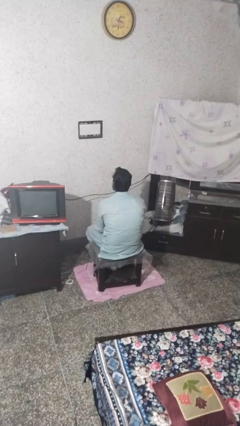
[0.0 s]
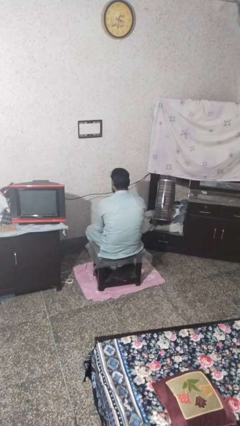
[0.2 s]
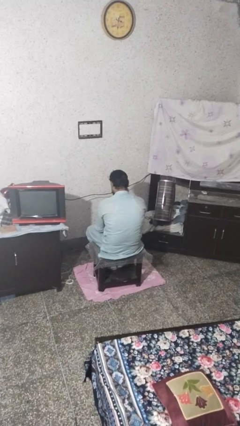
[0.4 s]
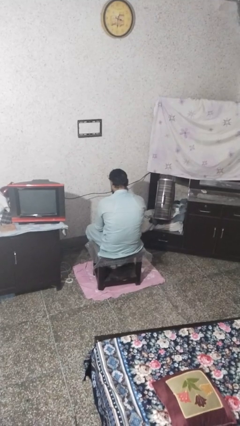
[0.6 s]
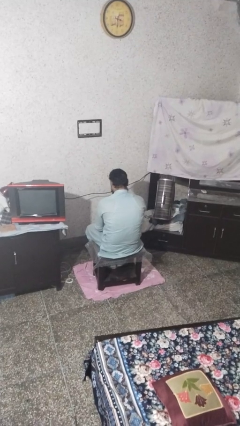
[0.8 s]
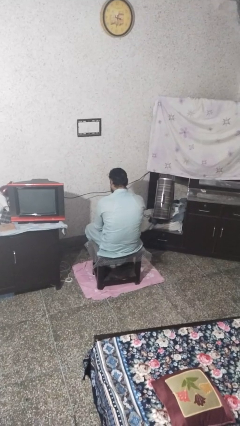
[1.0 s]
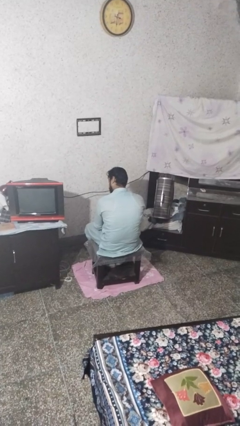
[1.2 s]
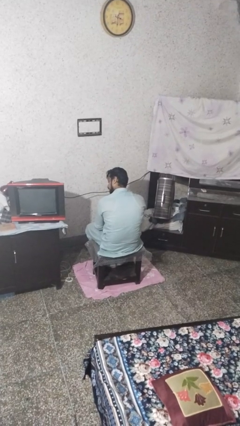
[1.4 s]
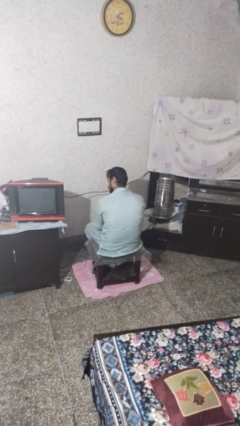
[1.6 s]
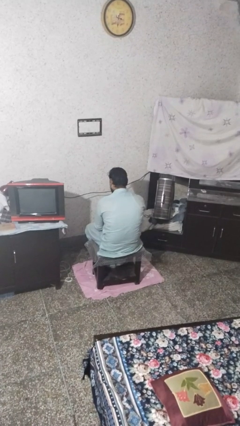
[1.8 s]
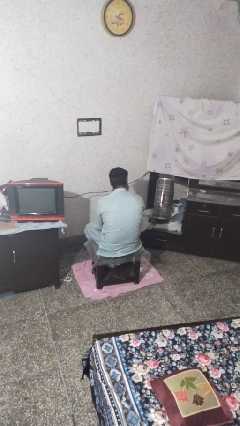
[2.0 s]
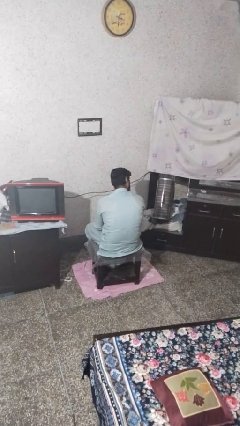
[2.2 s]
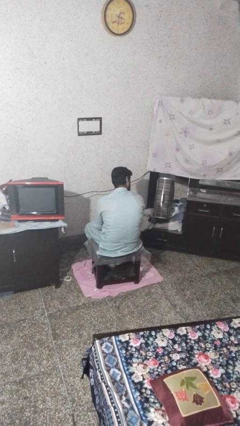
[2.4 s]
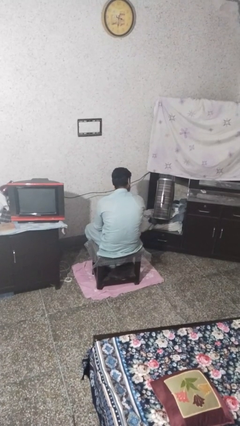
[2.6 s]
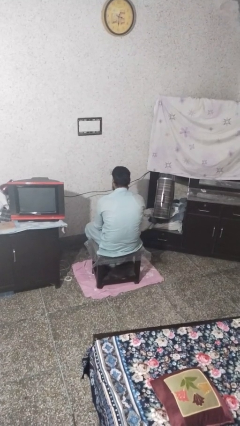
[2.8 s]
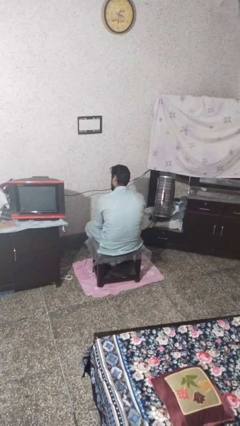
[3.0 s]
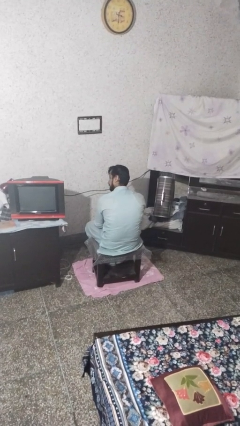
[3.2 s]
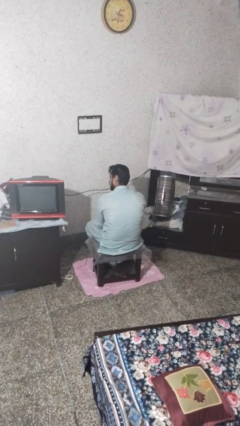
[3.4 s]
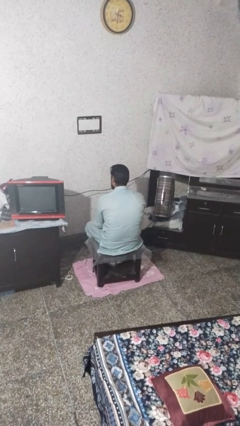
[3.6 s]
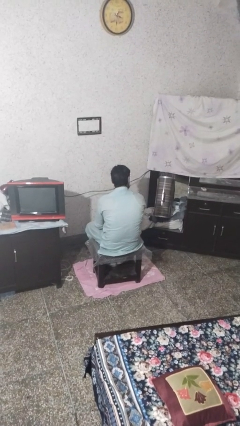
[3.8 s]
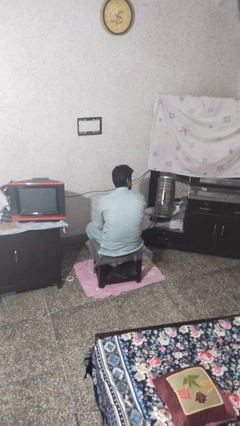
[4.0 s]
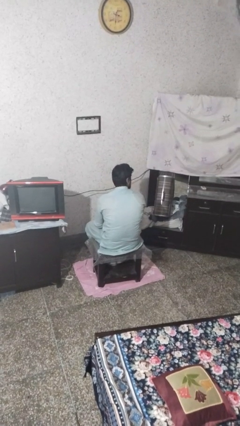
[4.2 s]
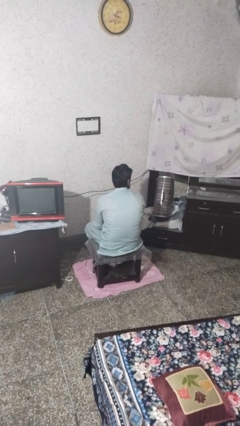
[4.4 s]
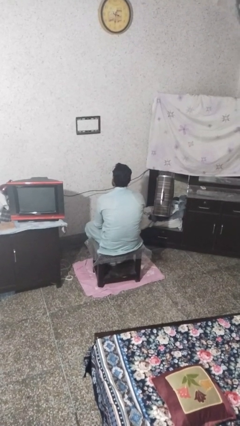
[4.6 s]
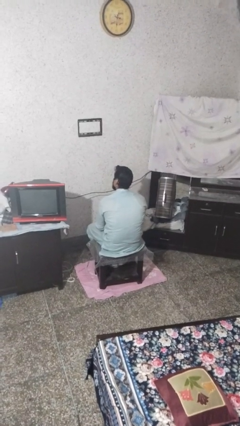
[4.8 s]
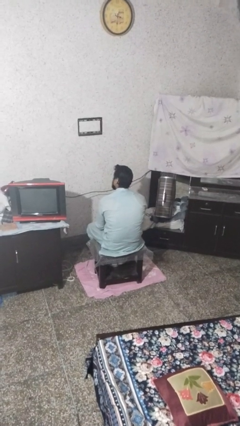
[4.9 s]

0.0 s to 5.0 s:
person shakes head

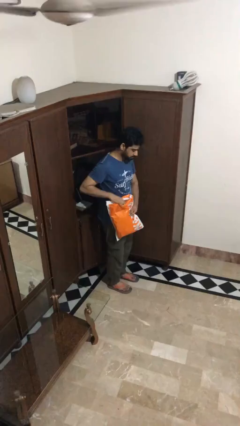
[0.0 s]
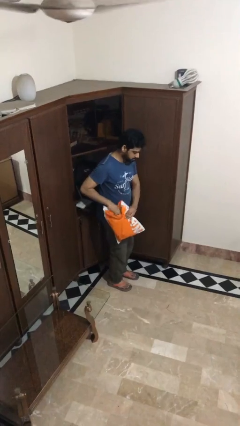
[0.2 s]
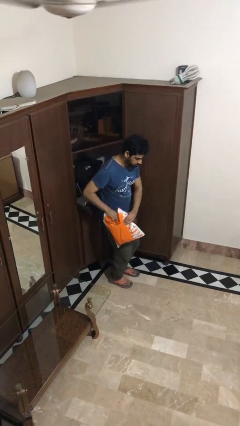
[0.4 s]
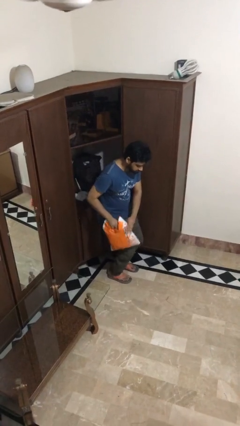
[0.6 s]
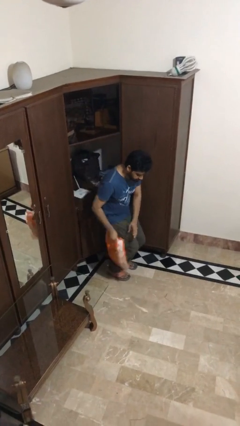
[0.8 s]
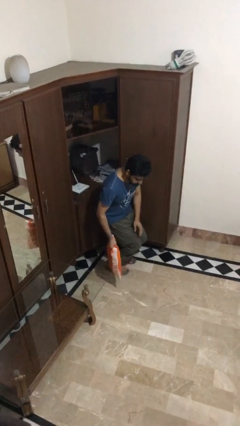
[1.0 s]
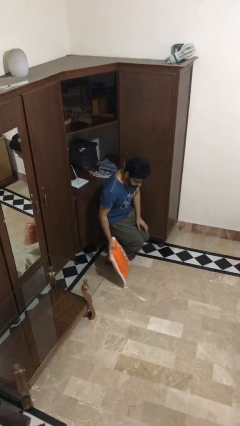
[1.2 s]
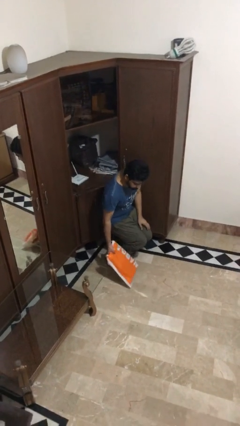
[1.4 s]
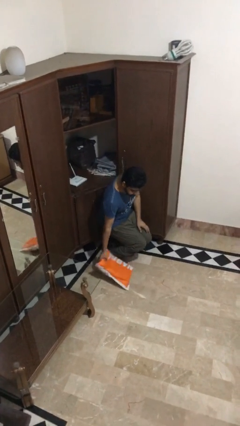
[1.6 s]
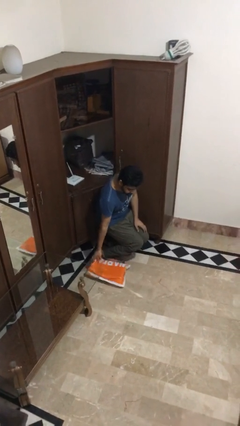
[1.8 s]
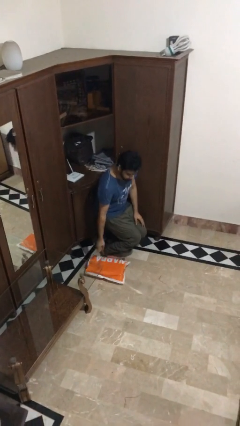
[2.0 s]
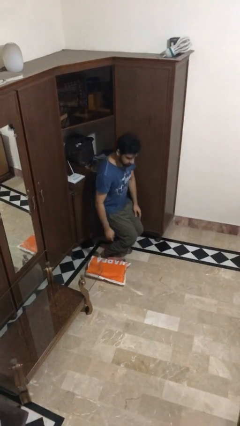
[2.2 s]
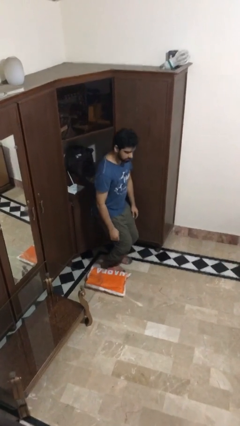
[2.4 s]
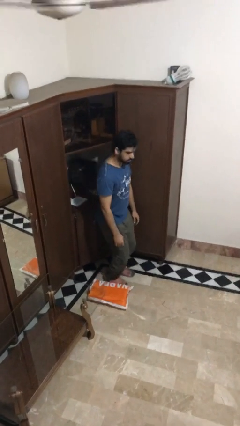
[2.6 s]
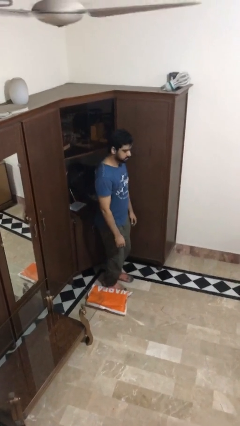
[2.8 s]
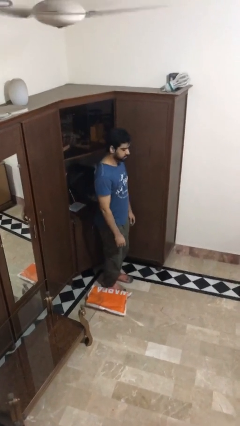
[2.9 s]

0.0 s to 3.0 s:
person puts down object on floor

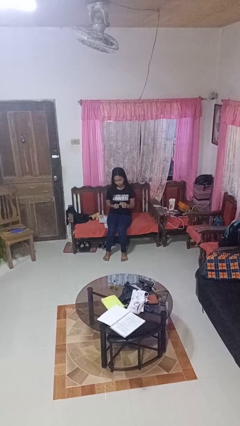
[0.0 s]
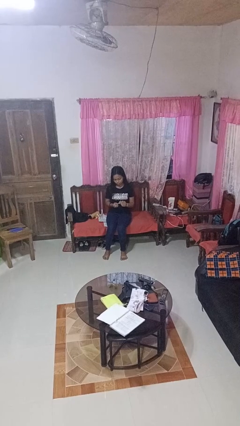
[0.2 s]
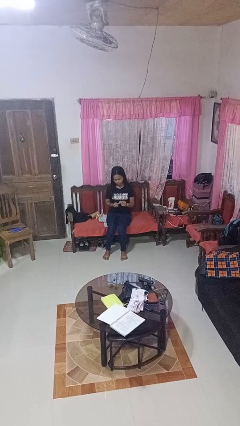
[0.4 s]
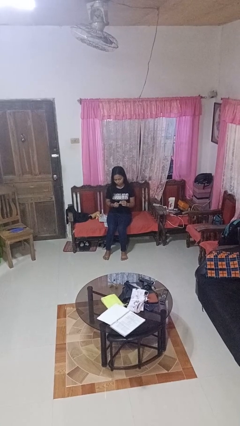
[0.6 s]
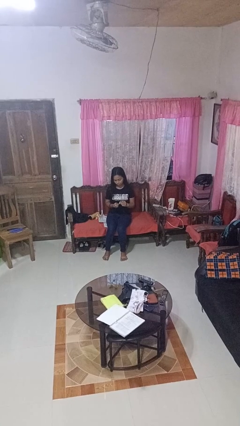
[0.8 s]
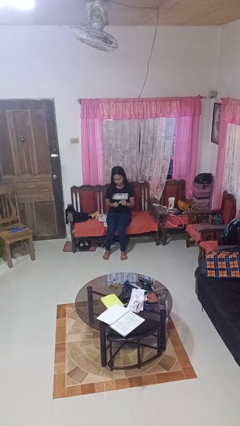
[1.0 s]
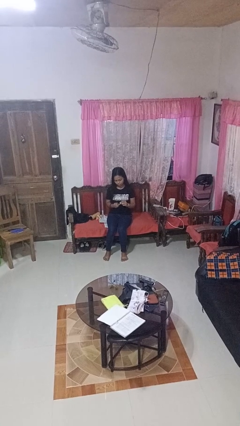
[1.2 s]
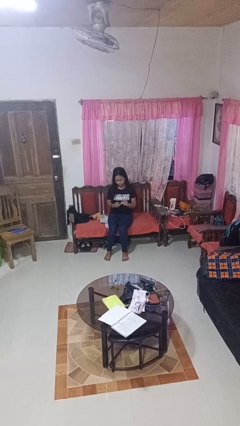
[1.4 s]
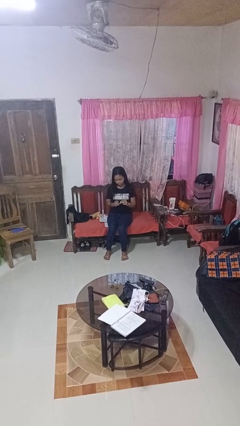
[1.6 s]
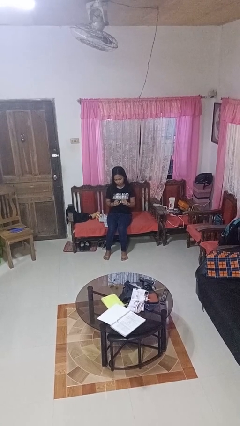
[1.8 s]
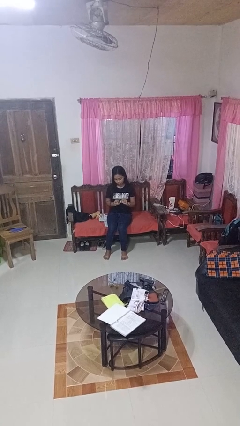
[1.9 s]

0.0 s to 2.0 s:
person clips fingernails

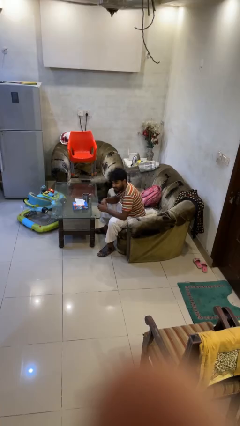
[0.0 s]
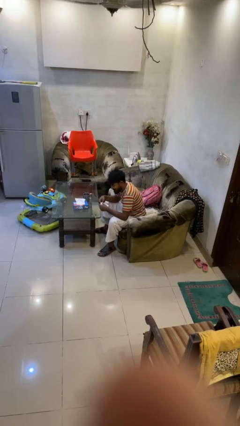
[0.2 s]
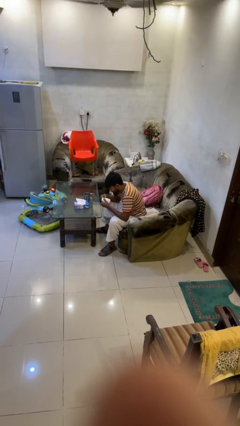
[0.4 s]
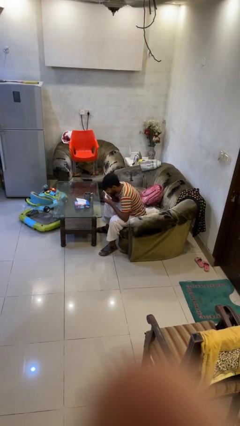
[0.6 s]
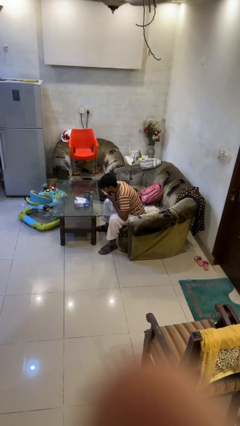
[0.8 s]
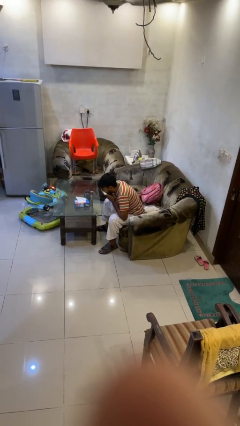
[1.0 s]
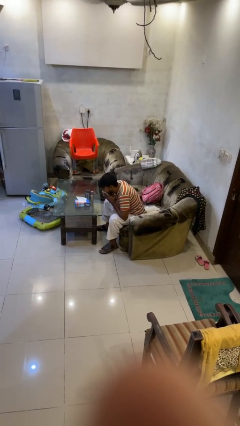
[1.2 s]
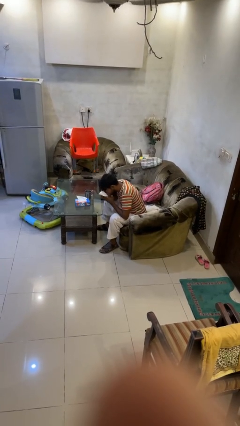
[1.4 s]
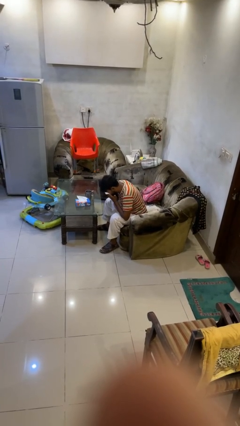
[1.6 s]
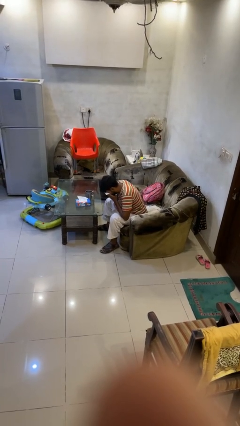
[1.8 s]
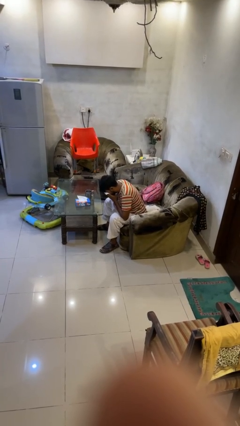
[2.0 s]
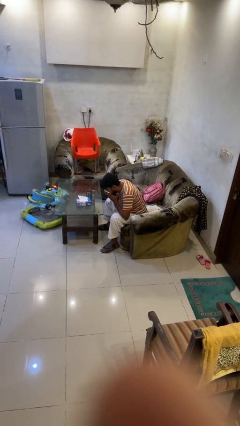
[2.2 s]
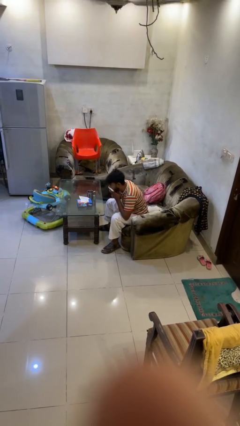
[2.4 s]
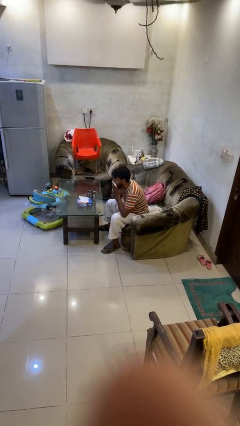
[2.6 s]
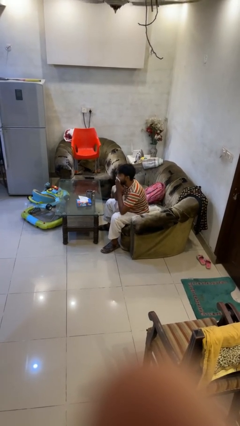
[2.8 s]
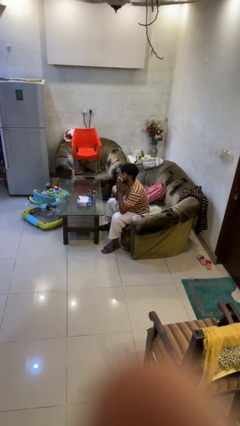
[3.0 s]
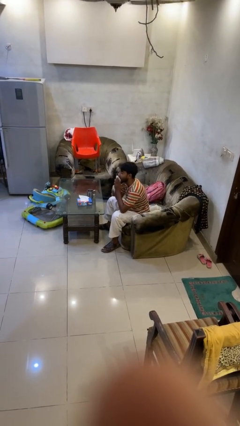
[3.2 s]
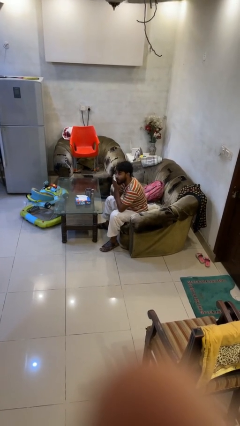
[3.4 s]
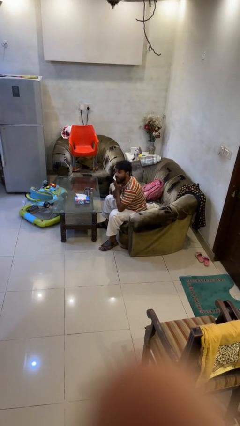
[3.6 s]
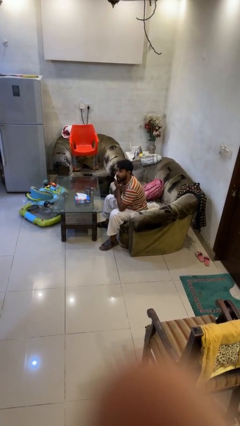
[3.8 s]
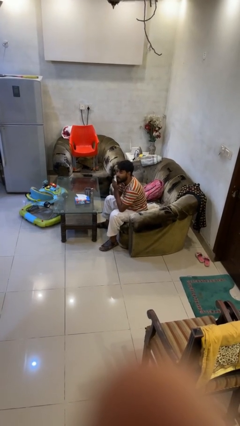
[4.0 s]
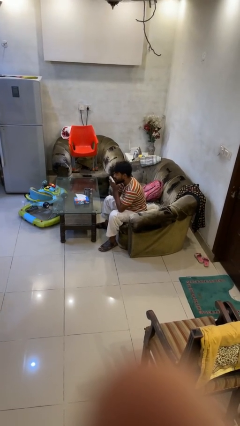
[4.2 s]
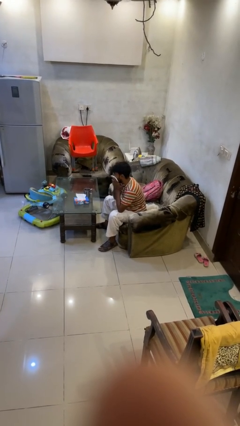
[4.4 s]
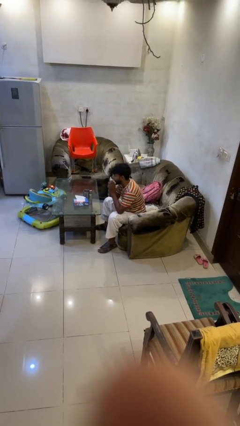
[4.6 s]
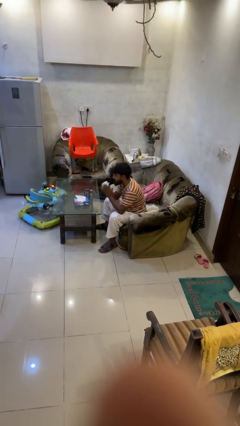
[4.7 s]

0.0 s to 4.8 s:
person wipes mouth with napkin

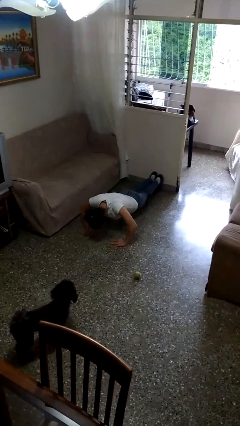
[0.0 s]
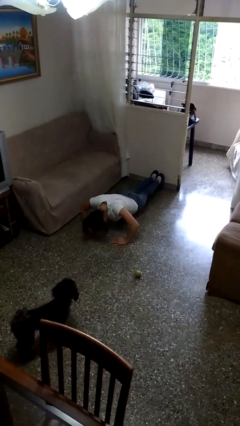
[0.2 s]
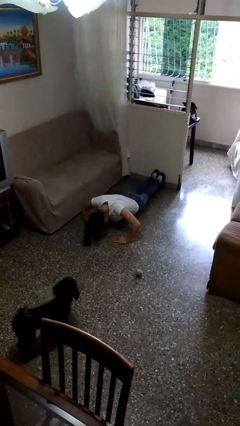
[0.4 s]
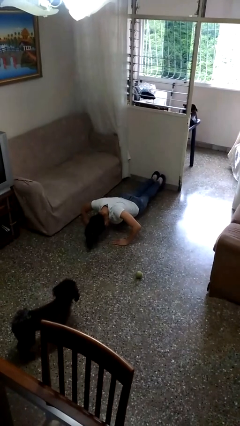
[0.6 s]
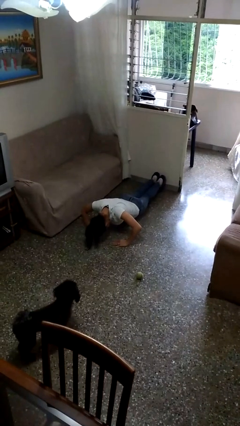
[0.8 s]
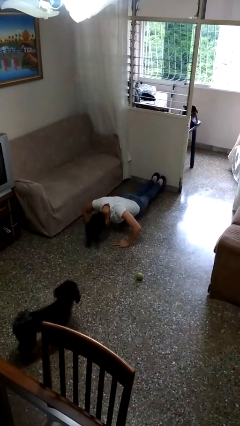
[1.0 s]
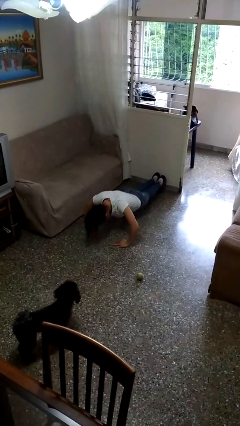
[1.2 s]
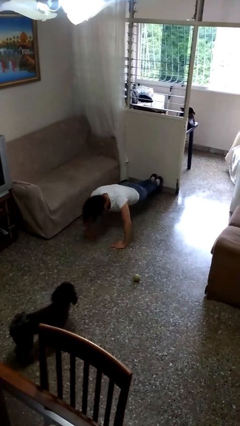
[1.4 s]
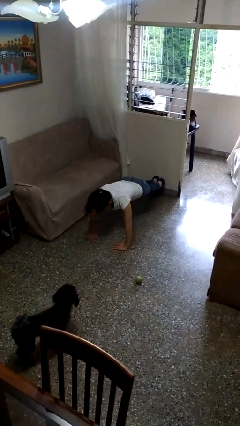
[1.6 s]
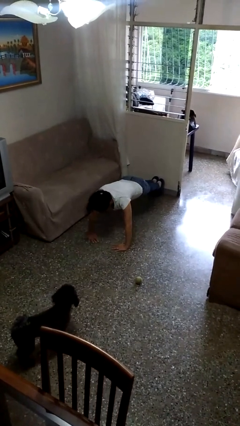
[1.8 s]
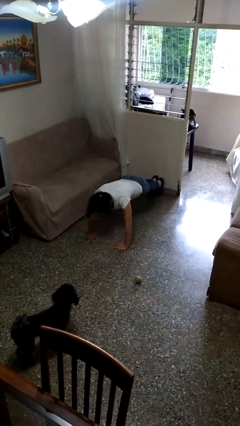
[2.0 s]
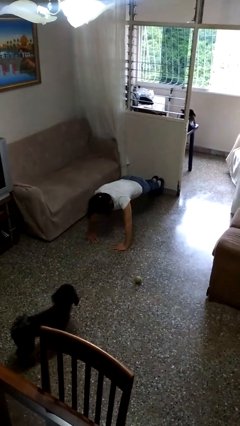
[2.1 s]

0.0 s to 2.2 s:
person exercises with pushup

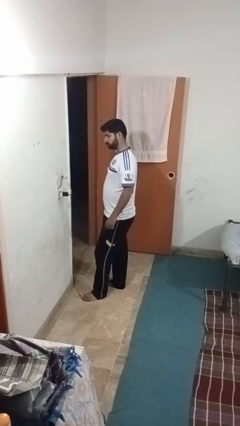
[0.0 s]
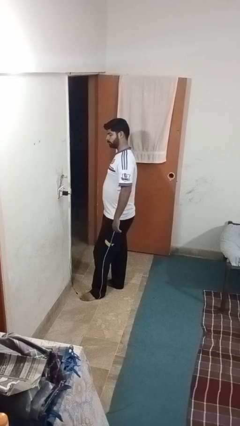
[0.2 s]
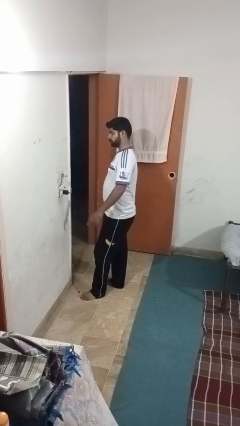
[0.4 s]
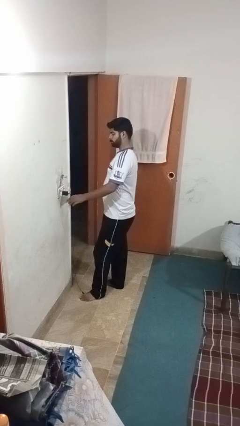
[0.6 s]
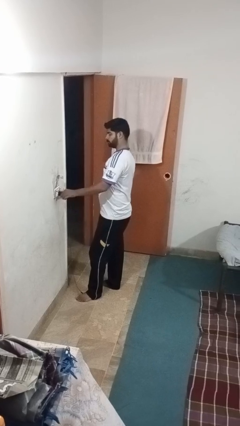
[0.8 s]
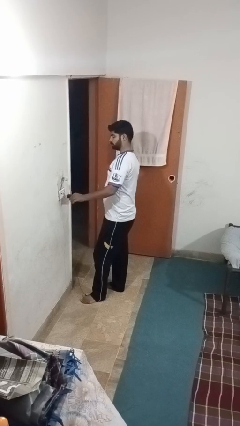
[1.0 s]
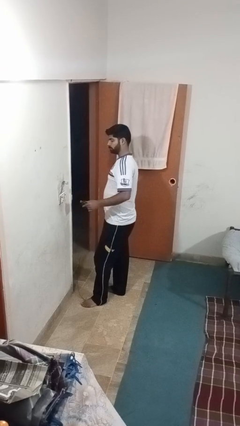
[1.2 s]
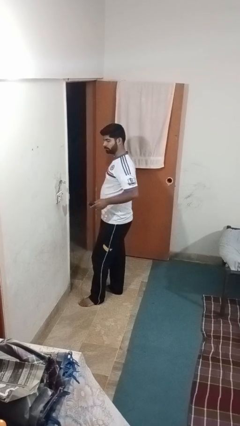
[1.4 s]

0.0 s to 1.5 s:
person unplugs from electrical socket
